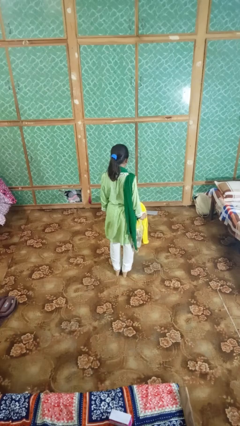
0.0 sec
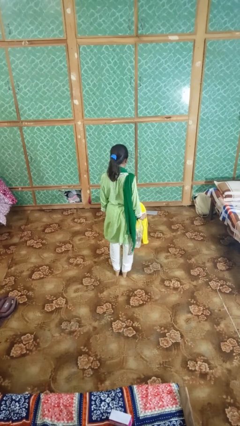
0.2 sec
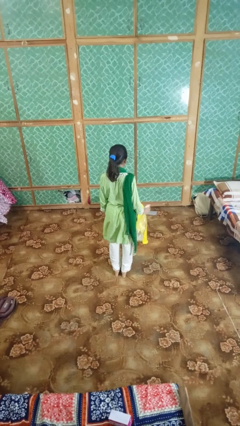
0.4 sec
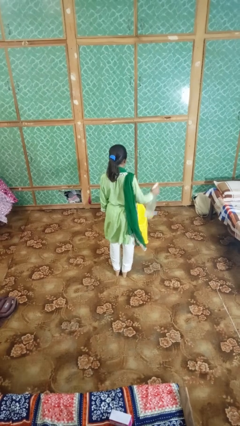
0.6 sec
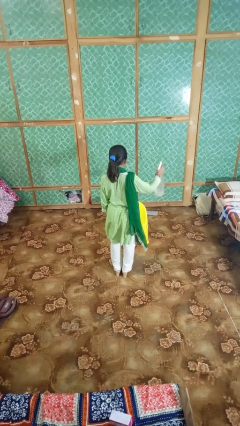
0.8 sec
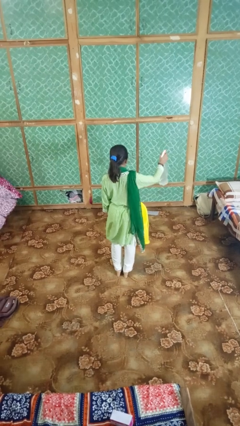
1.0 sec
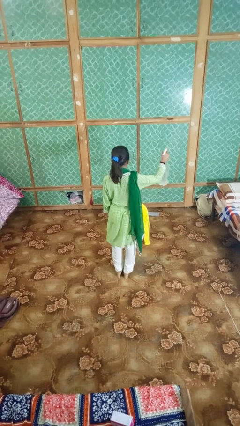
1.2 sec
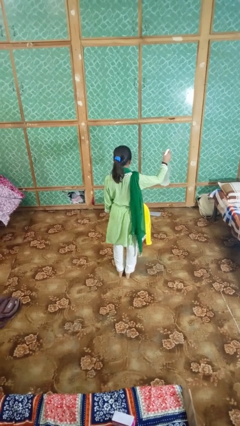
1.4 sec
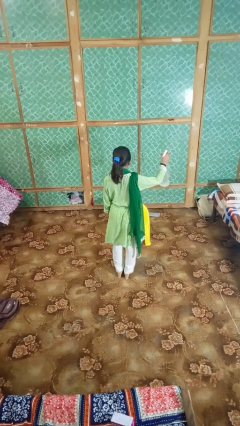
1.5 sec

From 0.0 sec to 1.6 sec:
person sprays from bottle

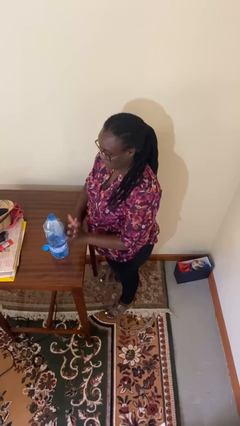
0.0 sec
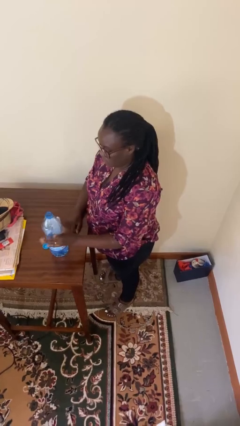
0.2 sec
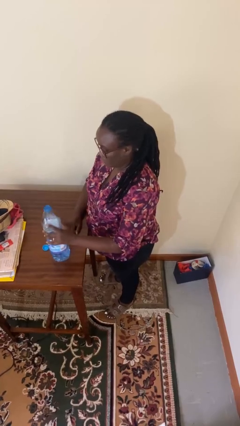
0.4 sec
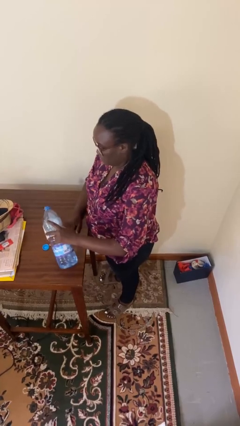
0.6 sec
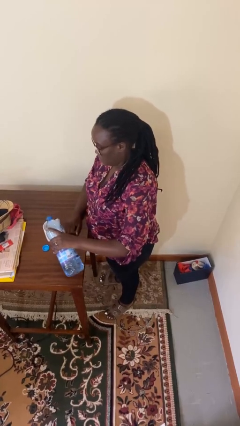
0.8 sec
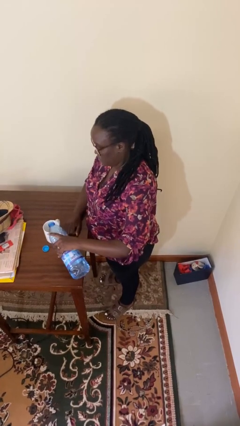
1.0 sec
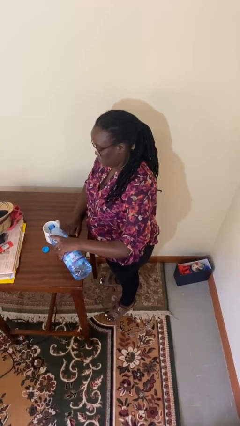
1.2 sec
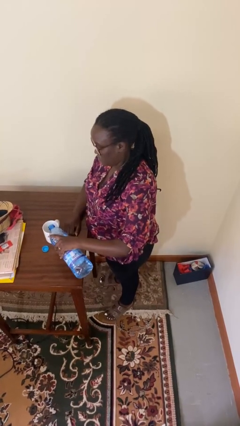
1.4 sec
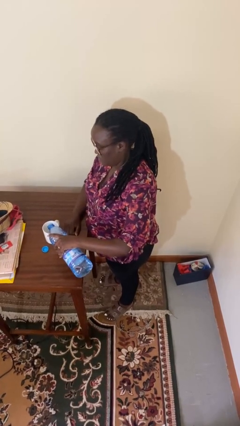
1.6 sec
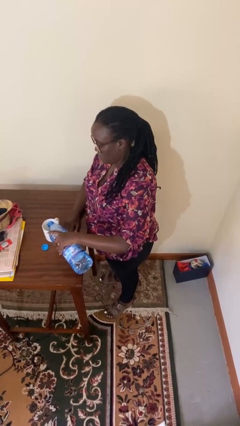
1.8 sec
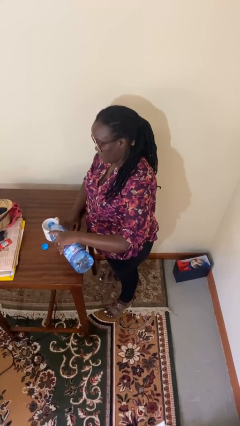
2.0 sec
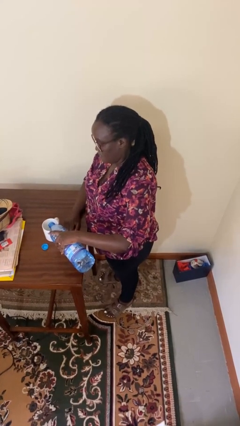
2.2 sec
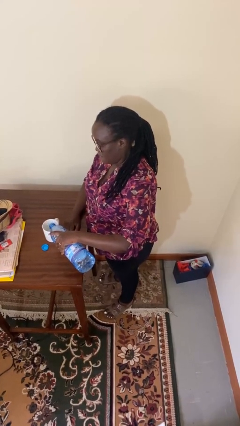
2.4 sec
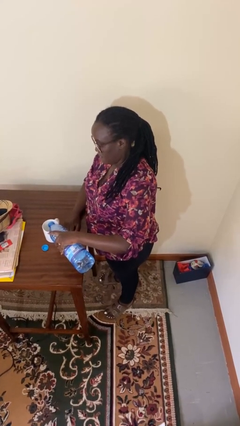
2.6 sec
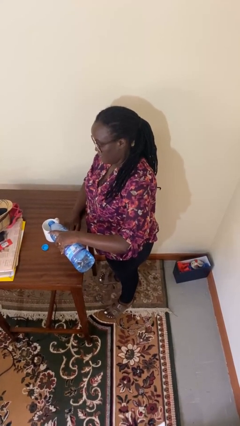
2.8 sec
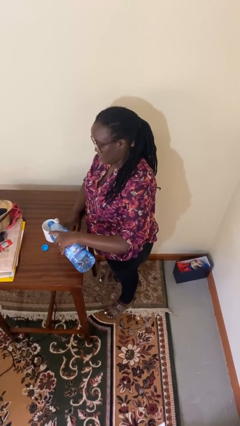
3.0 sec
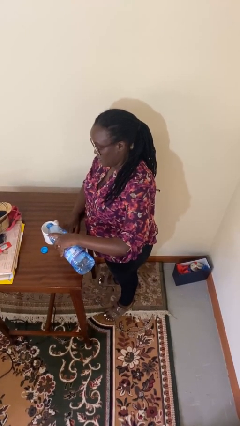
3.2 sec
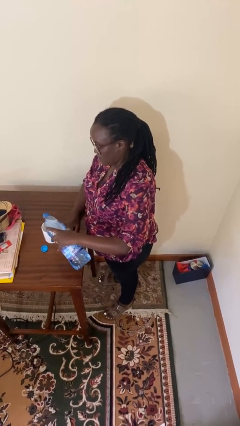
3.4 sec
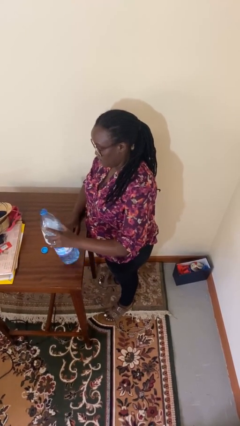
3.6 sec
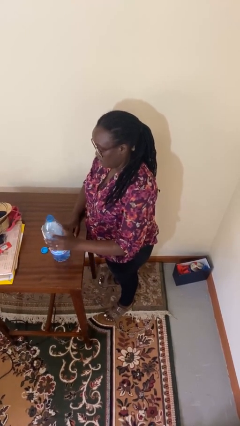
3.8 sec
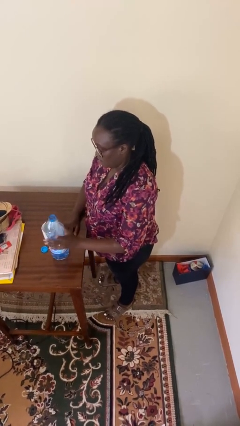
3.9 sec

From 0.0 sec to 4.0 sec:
person pours liquid into cup

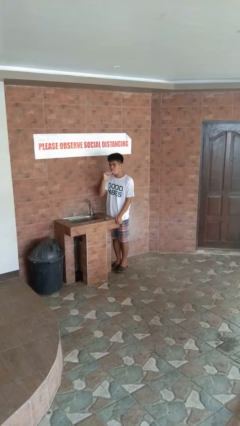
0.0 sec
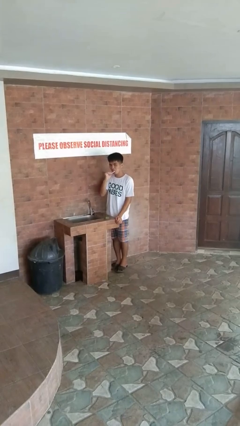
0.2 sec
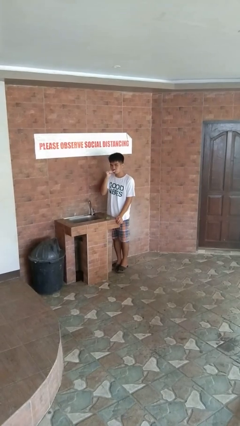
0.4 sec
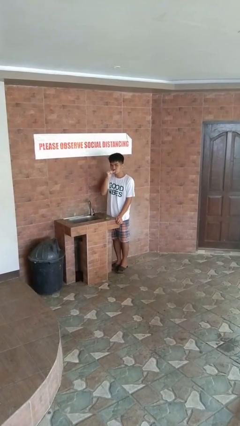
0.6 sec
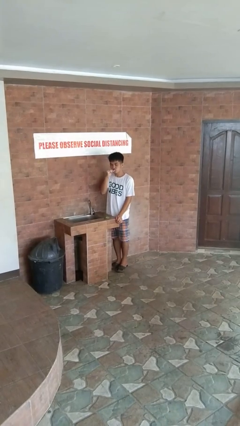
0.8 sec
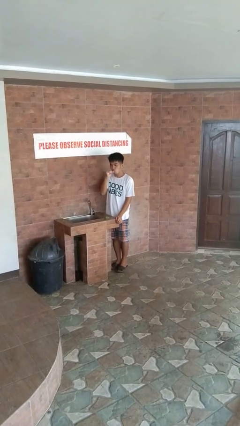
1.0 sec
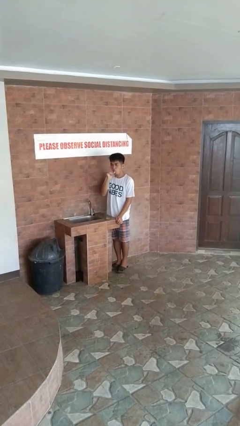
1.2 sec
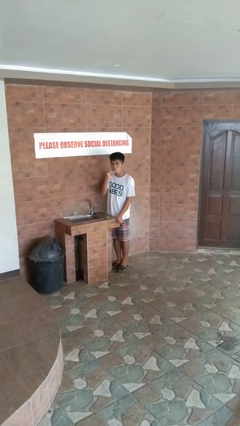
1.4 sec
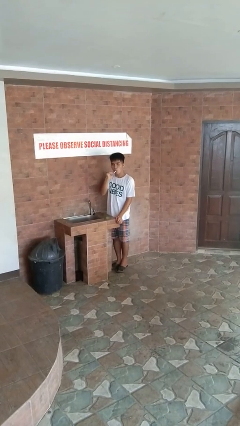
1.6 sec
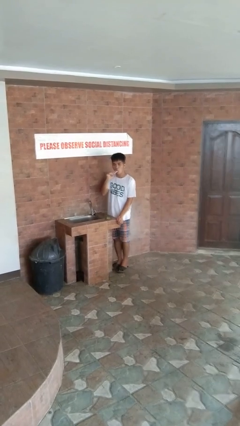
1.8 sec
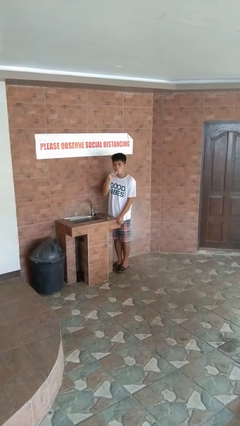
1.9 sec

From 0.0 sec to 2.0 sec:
person brushes teeth

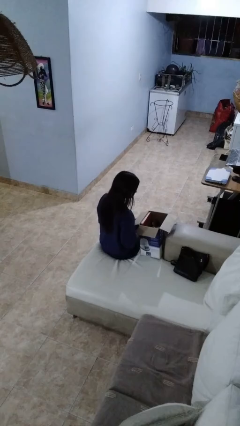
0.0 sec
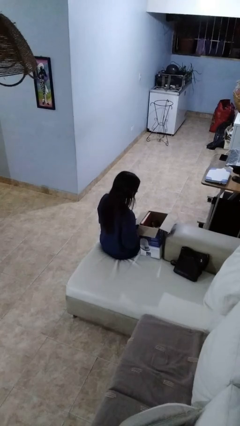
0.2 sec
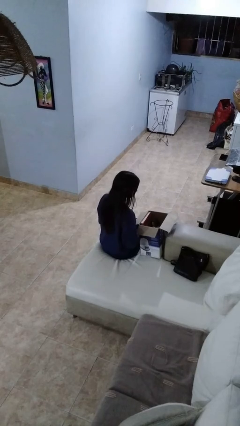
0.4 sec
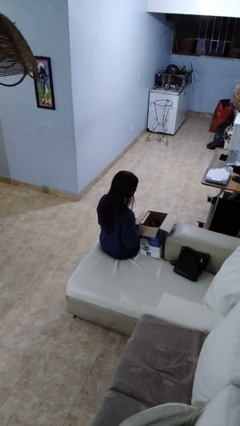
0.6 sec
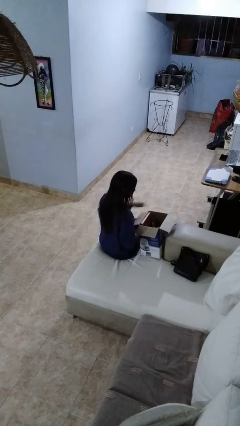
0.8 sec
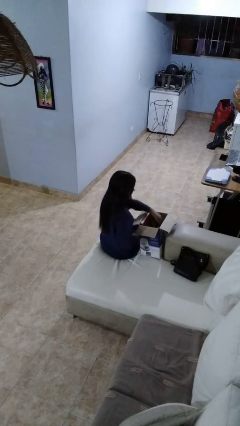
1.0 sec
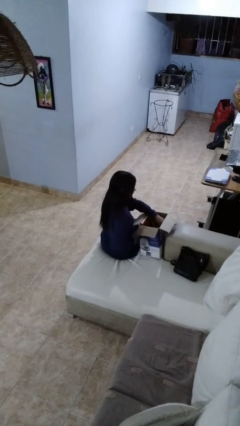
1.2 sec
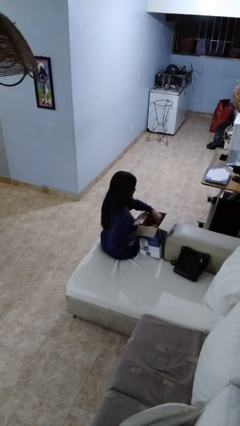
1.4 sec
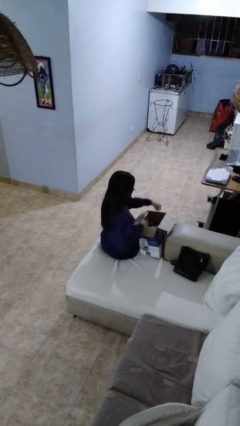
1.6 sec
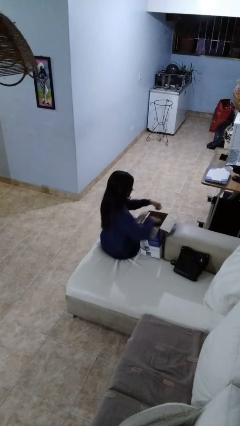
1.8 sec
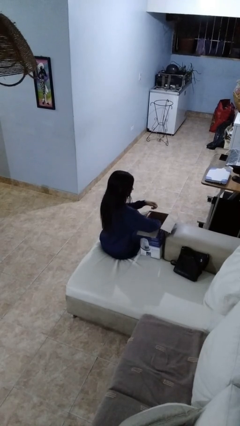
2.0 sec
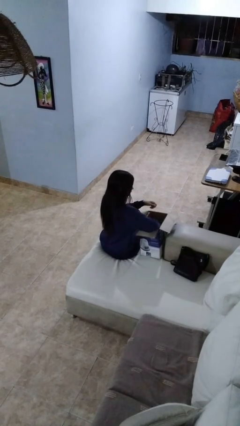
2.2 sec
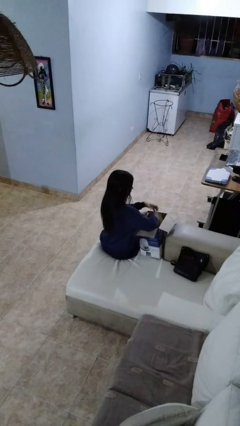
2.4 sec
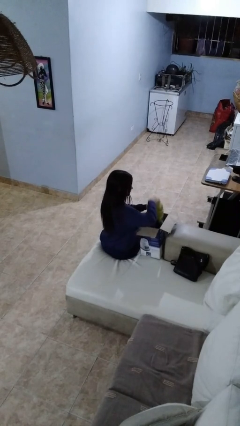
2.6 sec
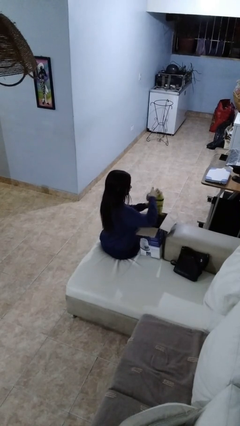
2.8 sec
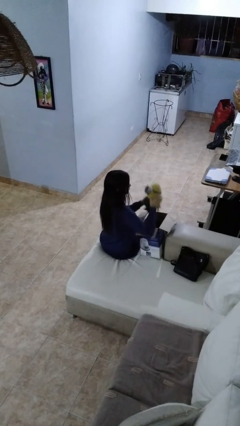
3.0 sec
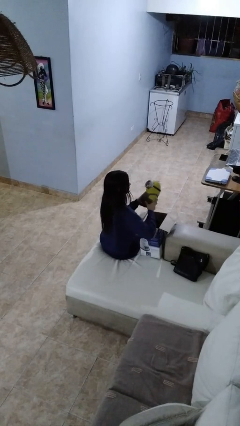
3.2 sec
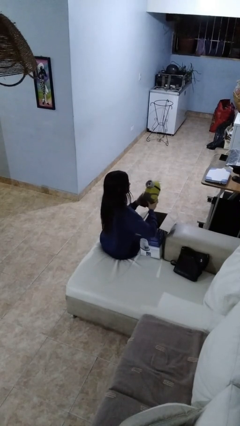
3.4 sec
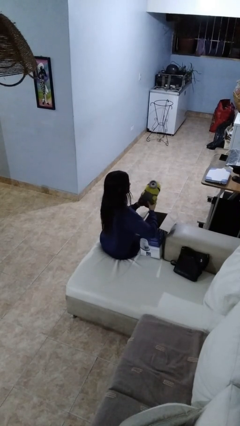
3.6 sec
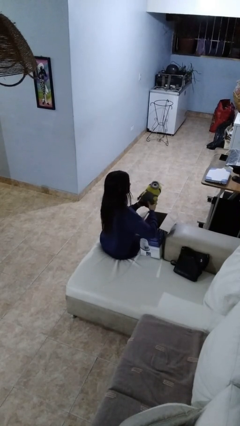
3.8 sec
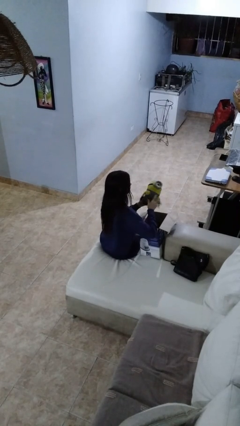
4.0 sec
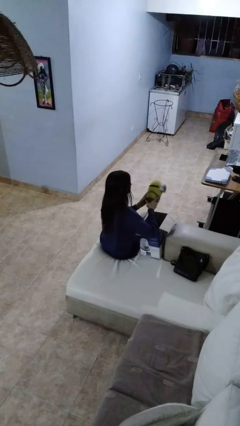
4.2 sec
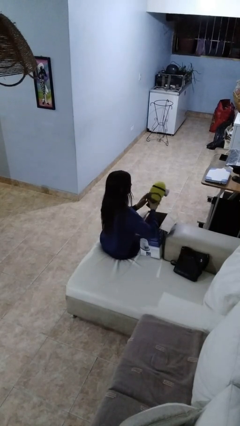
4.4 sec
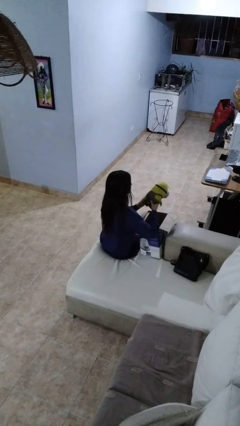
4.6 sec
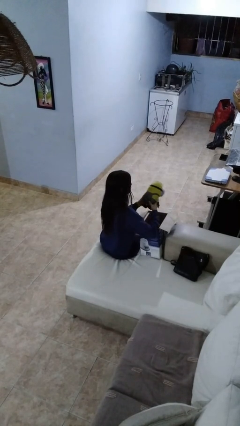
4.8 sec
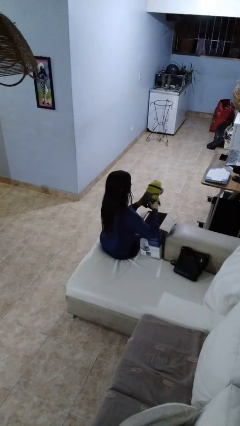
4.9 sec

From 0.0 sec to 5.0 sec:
person takes object from box

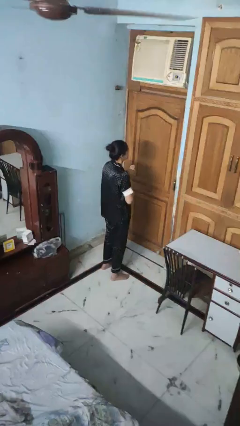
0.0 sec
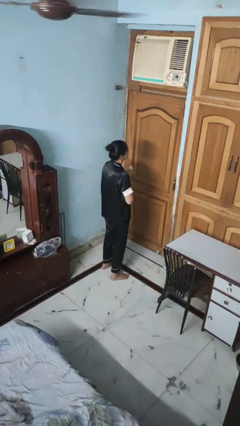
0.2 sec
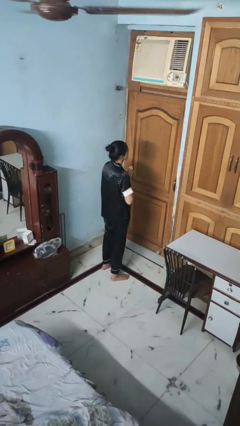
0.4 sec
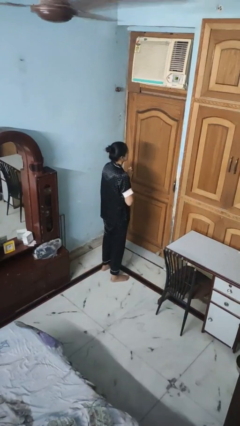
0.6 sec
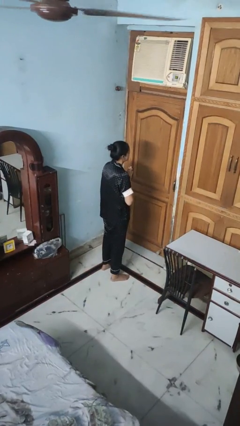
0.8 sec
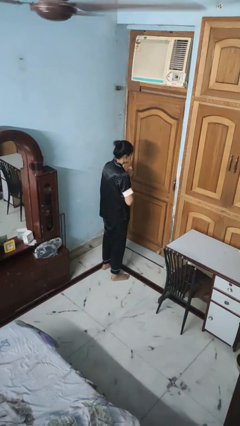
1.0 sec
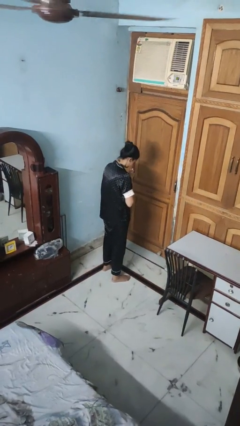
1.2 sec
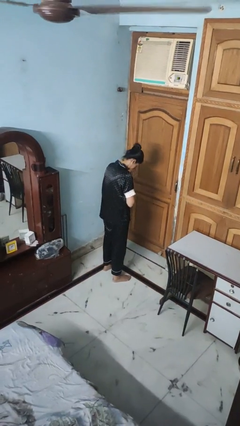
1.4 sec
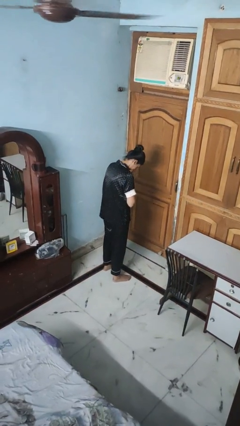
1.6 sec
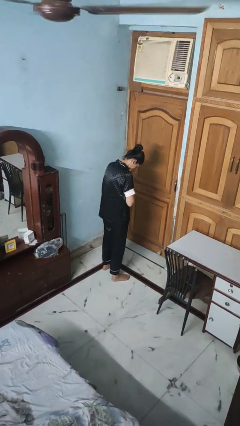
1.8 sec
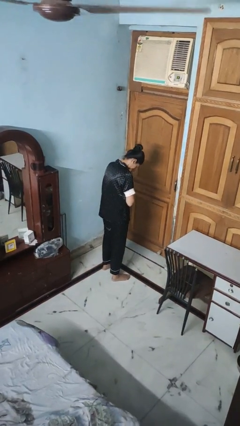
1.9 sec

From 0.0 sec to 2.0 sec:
person prays

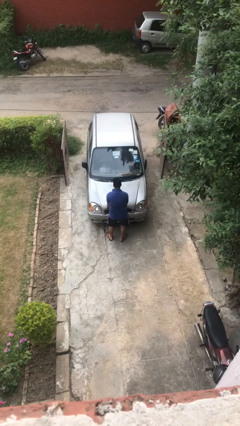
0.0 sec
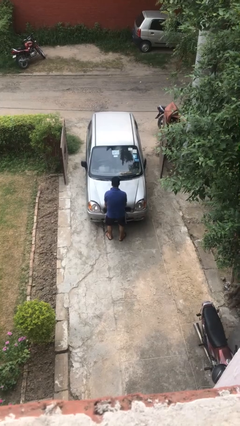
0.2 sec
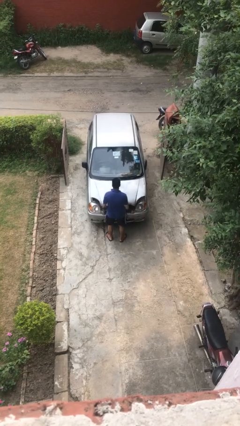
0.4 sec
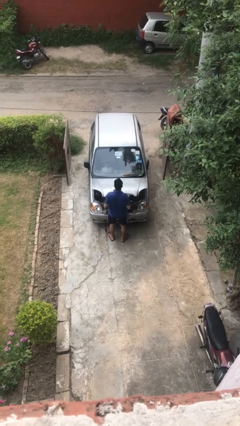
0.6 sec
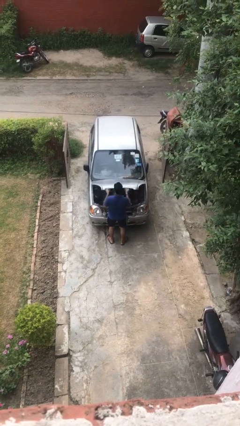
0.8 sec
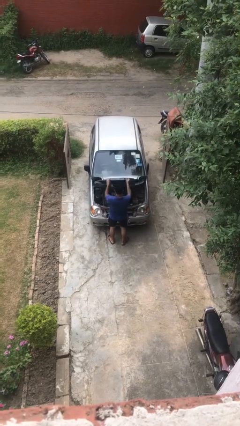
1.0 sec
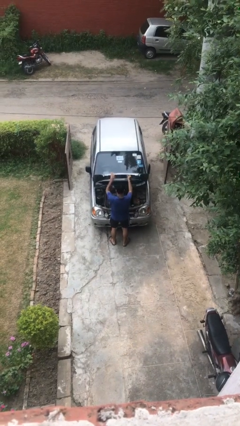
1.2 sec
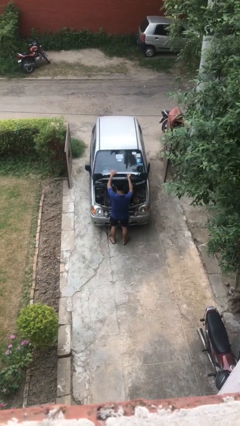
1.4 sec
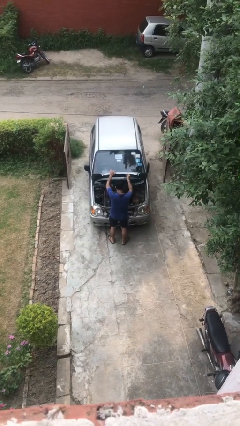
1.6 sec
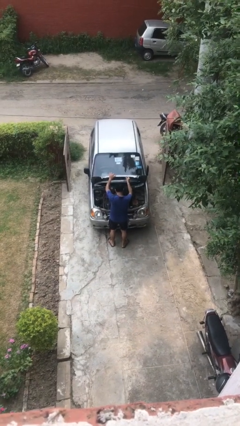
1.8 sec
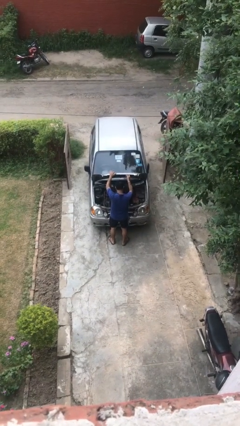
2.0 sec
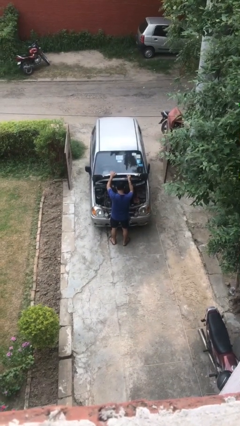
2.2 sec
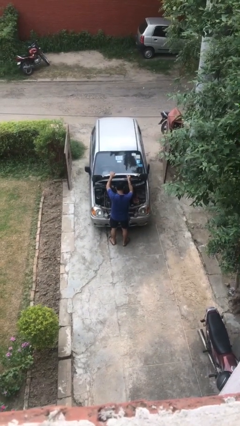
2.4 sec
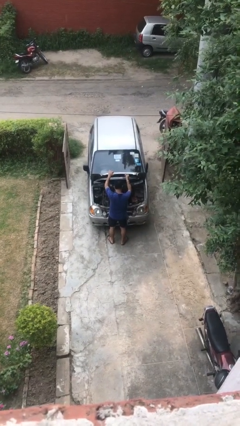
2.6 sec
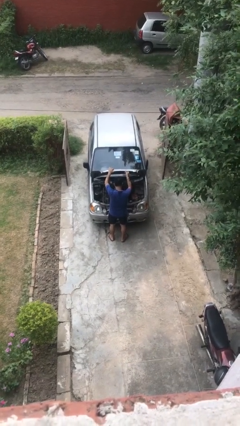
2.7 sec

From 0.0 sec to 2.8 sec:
person opens car hood
